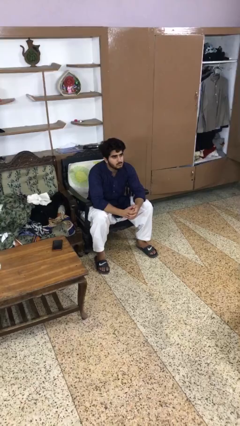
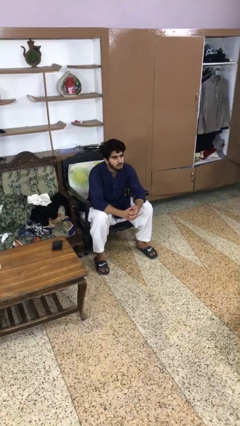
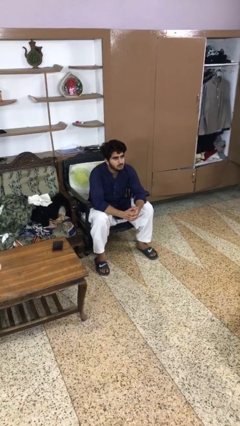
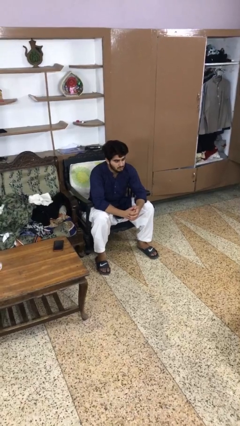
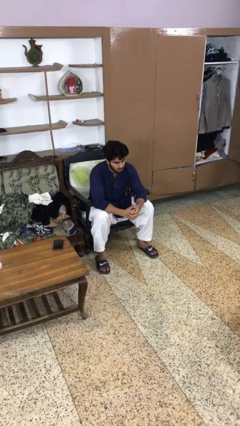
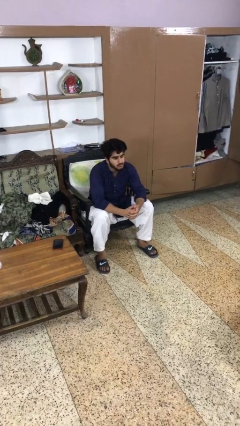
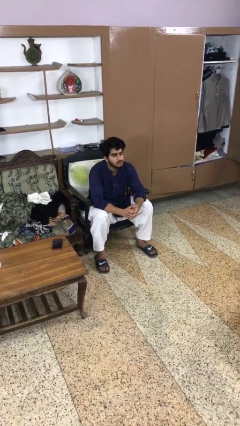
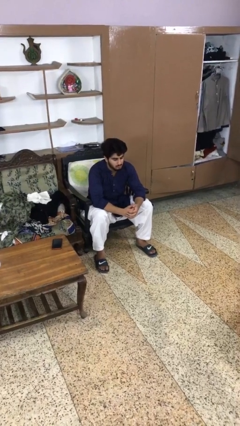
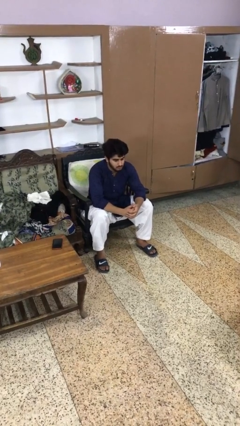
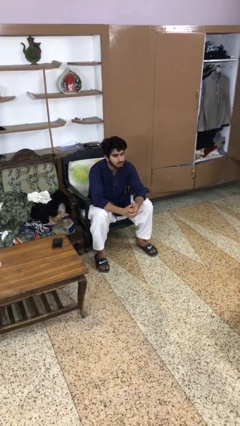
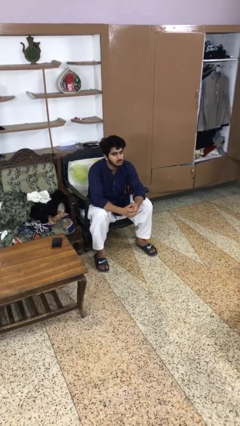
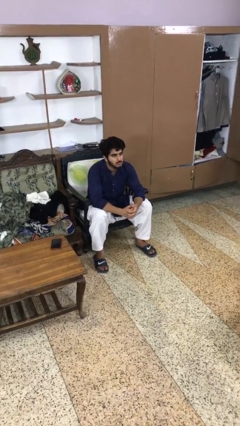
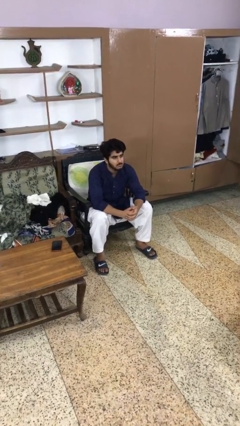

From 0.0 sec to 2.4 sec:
person nods head

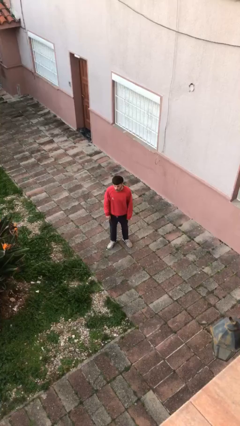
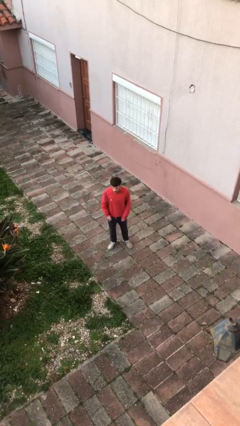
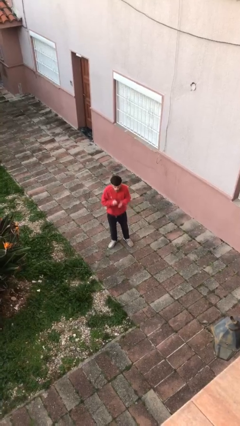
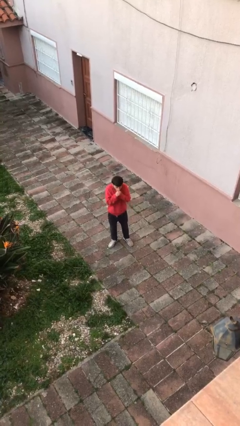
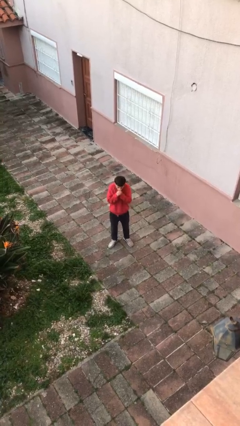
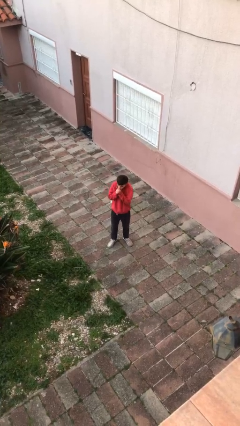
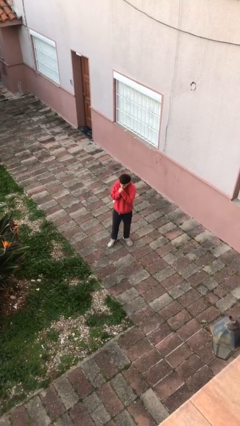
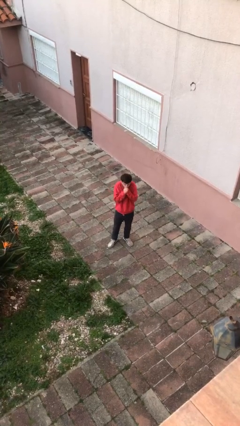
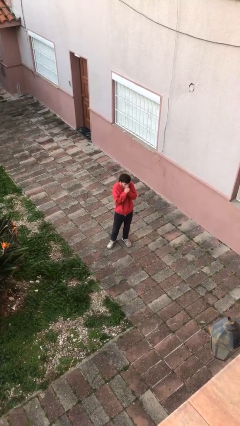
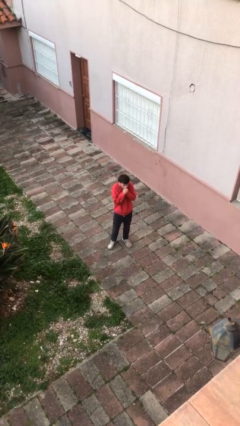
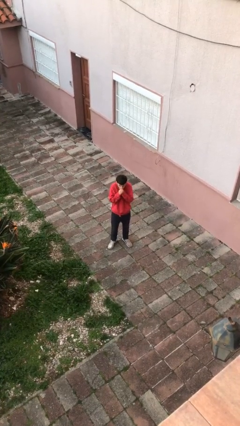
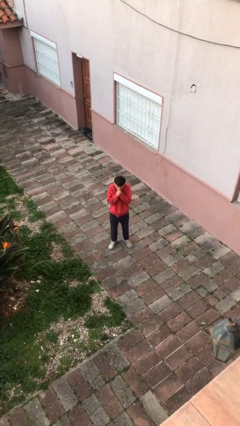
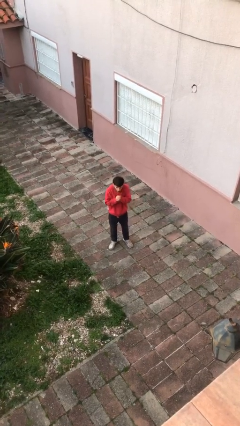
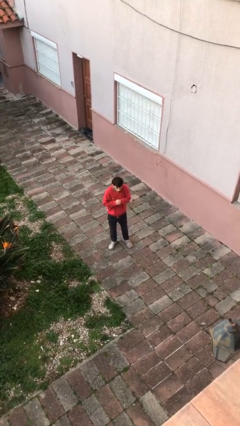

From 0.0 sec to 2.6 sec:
person blows into hands

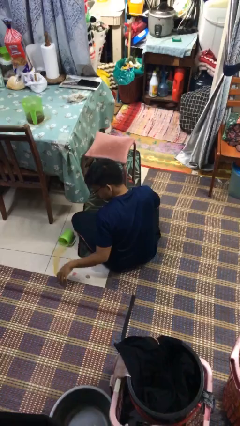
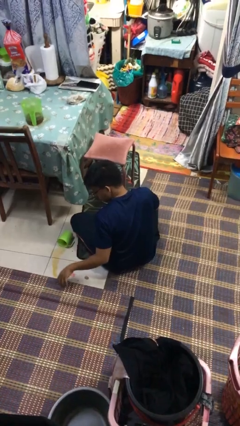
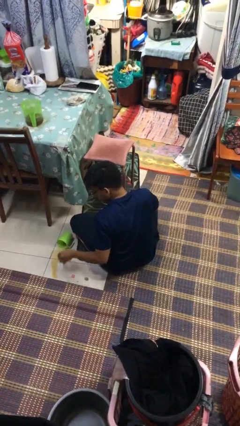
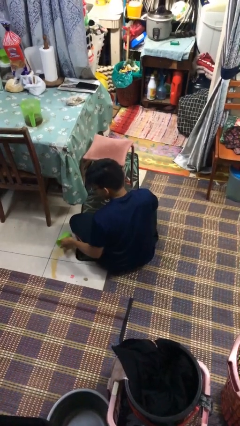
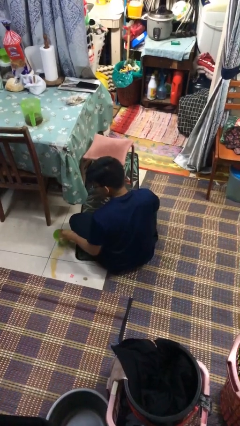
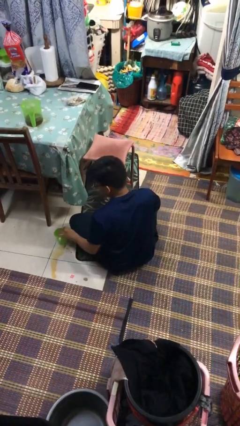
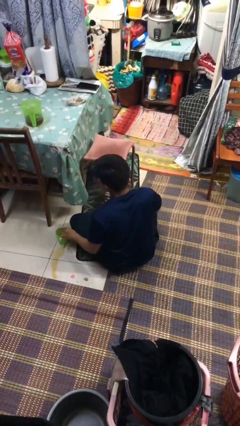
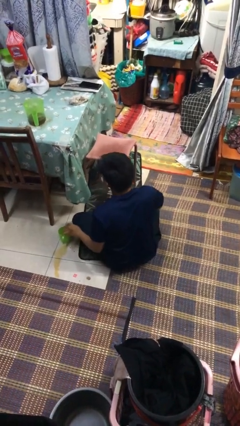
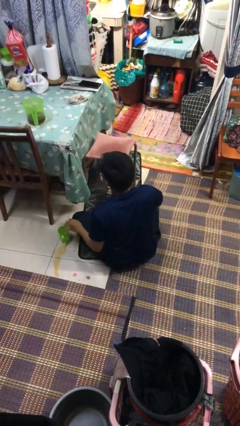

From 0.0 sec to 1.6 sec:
person sets upright glass

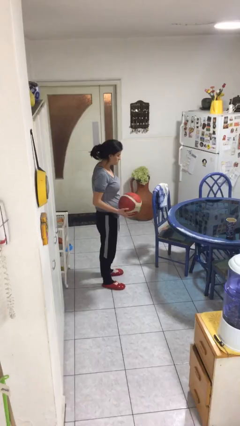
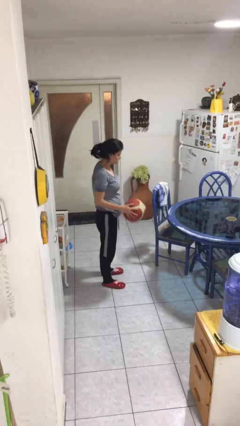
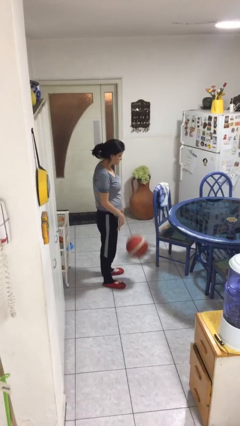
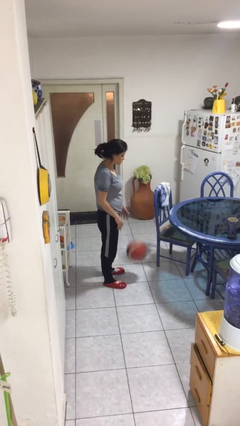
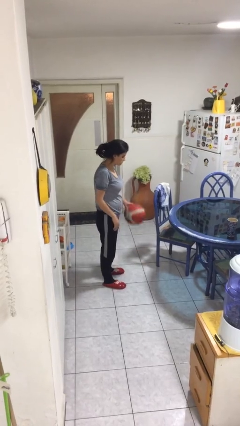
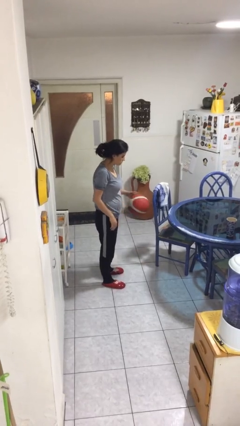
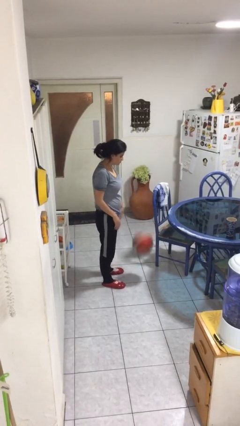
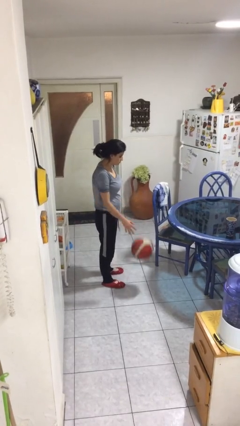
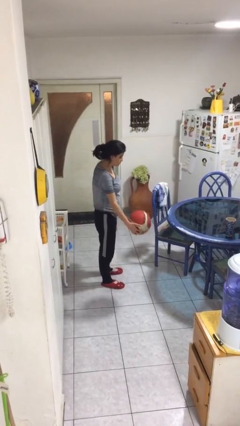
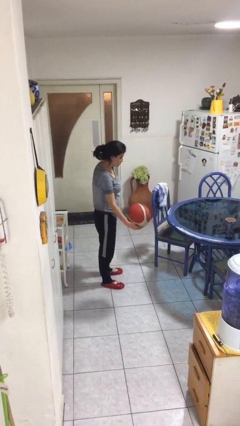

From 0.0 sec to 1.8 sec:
person bounces ball on floor

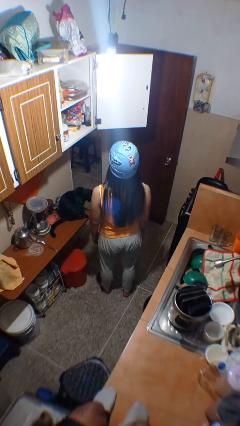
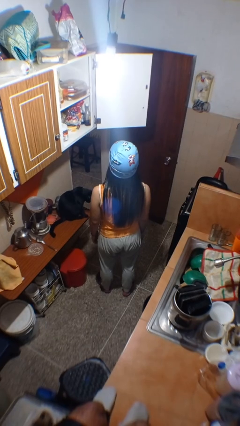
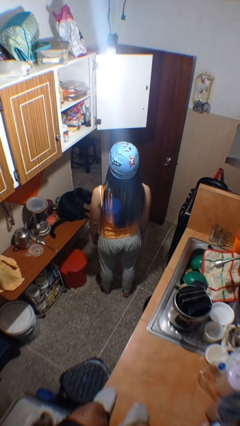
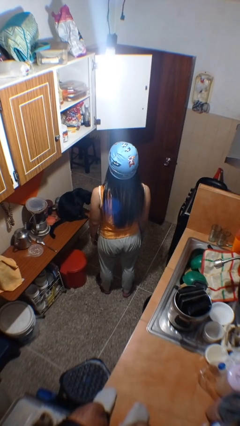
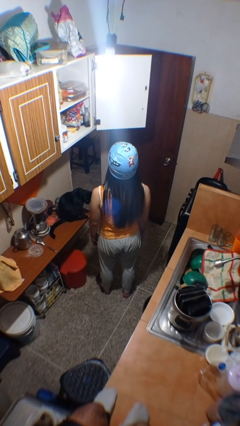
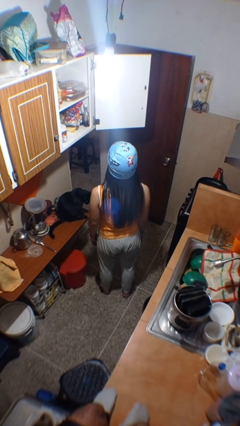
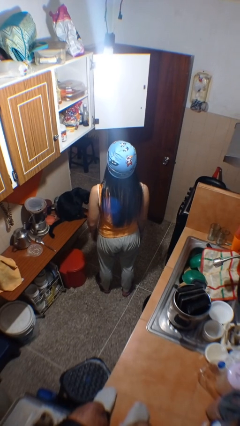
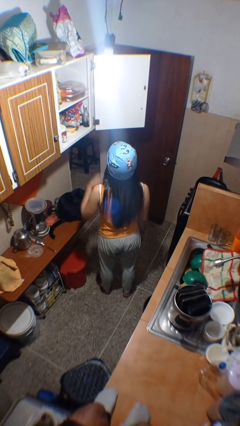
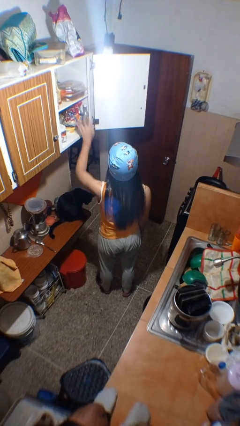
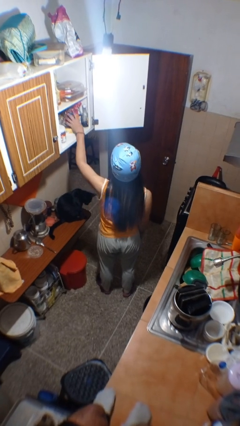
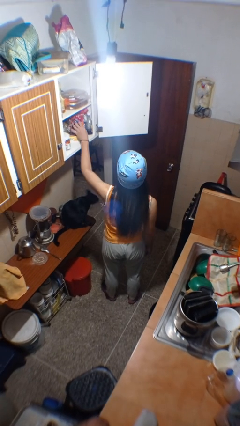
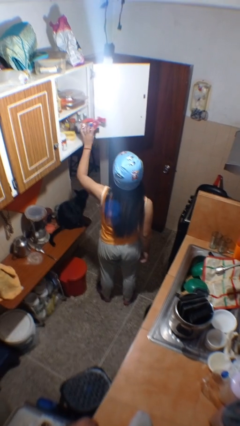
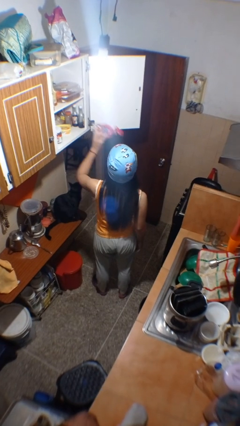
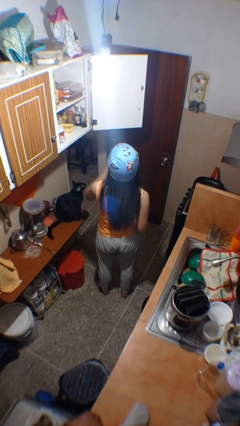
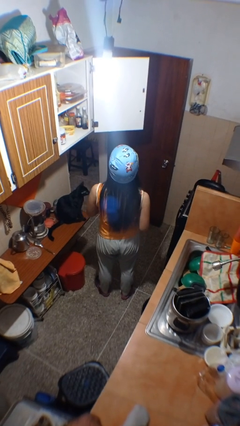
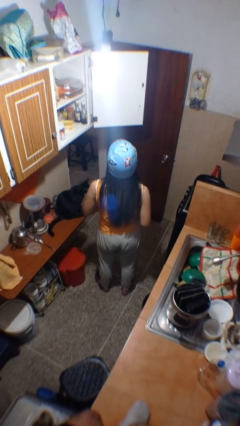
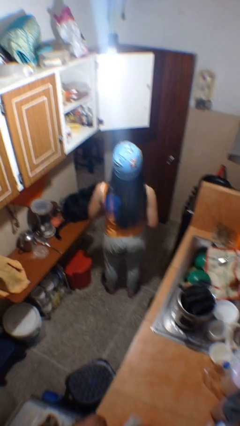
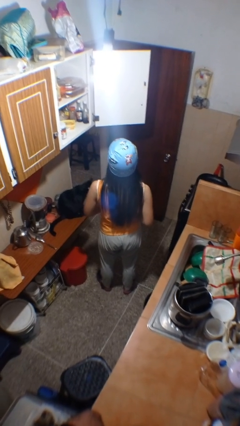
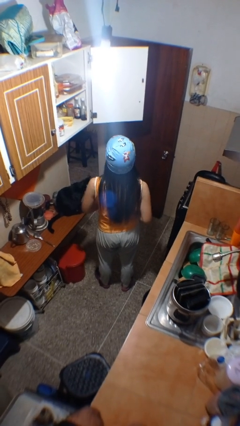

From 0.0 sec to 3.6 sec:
person picks up object from cabinet

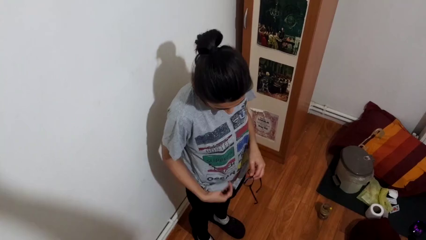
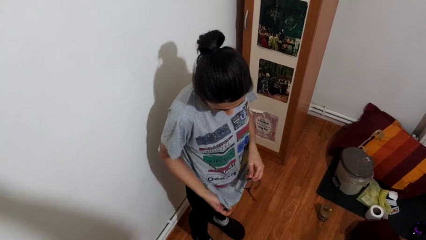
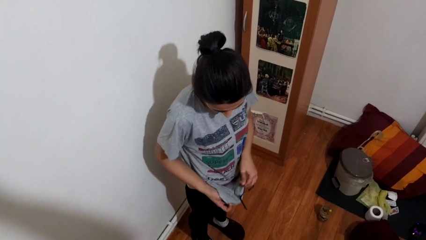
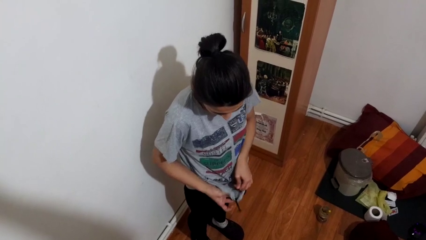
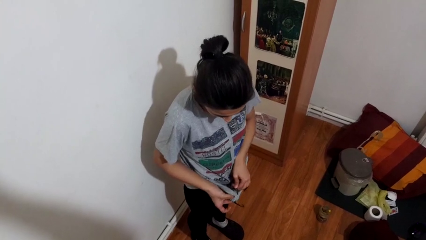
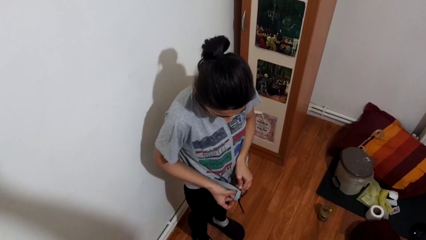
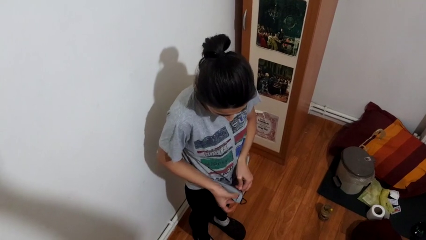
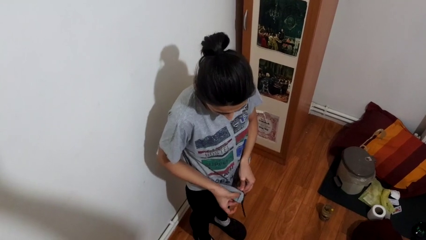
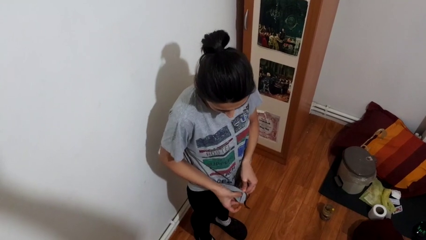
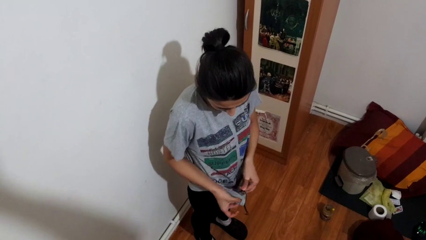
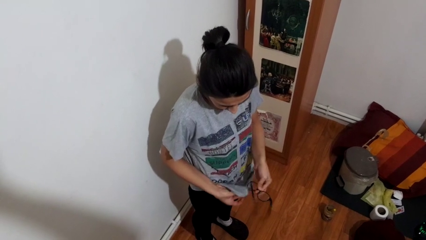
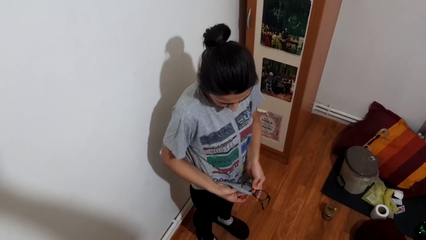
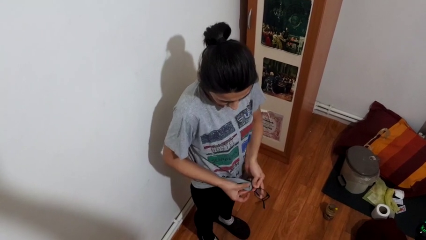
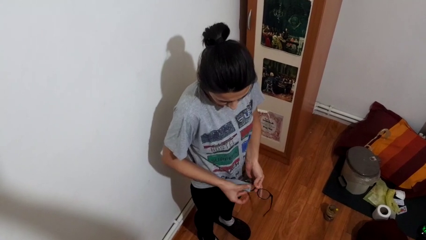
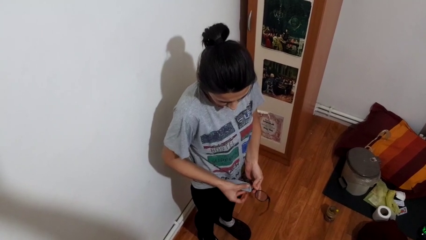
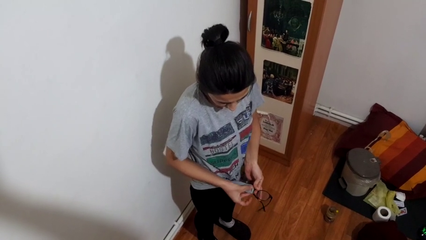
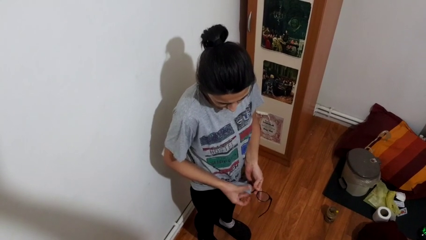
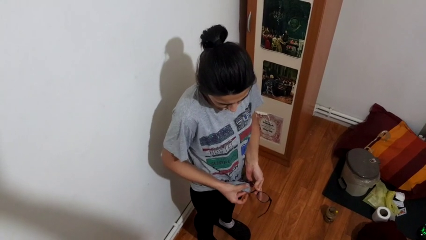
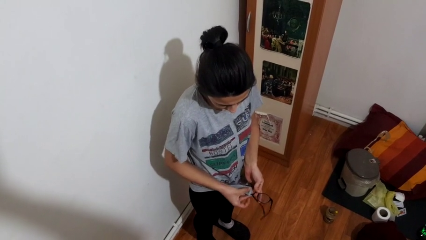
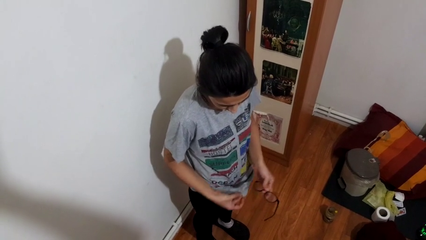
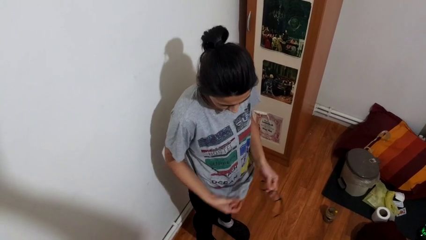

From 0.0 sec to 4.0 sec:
person cleans eyeglasses

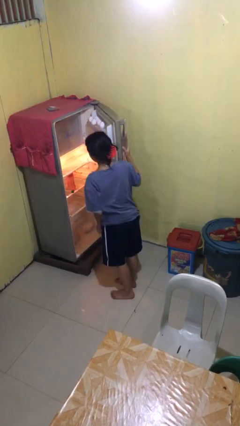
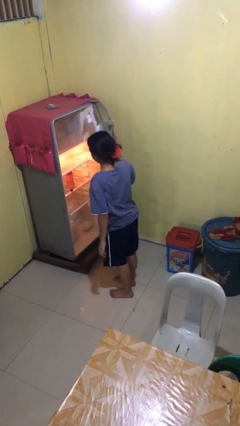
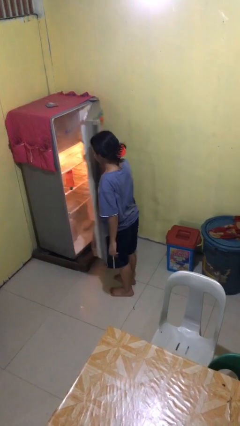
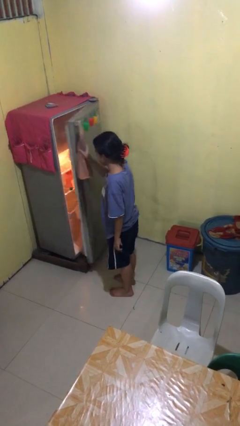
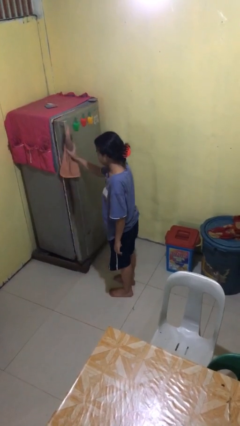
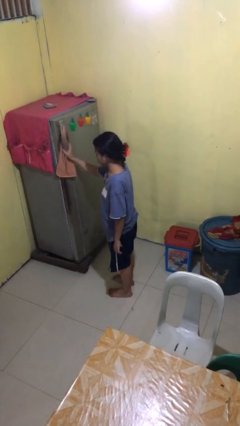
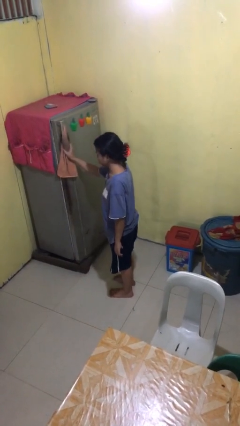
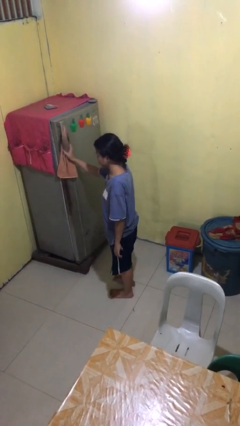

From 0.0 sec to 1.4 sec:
person closes refrigerator
